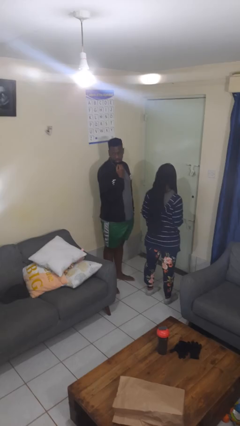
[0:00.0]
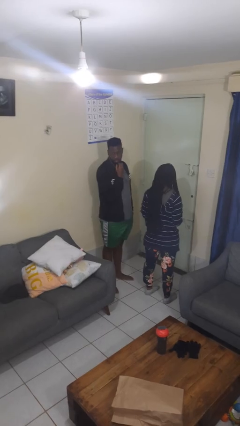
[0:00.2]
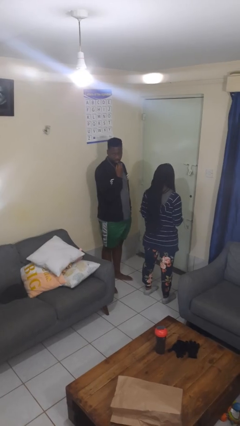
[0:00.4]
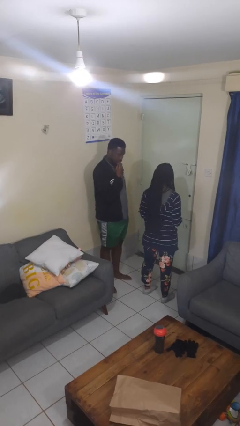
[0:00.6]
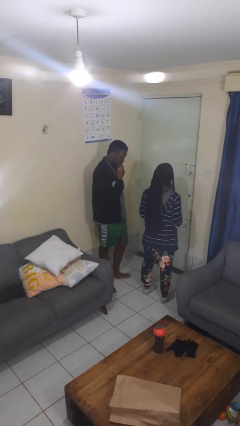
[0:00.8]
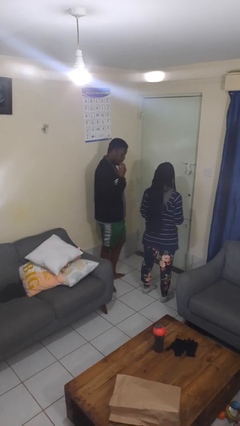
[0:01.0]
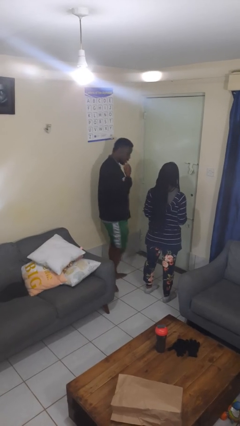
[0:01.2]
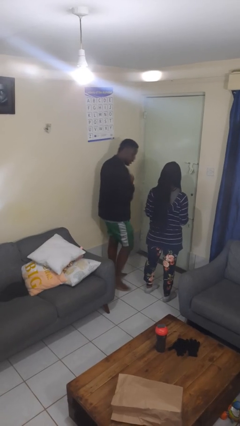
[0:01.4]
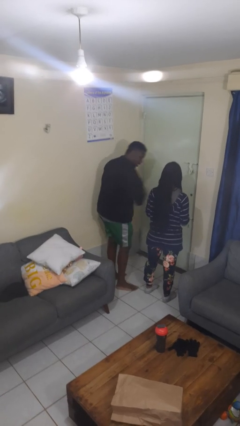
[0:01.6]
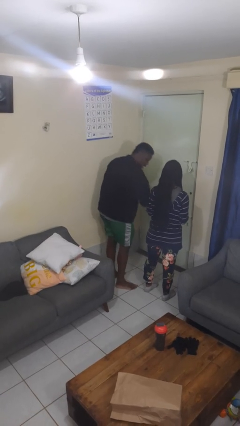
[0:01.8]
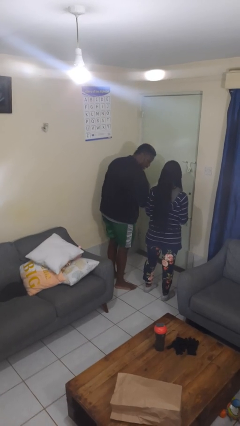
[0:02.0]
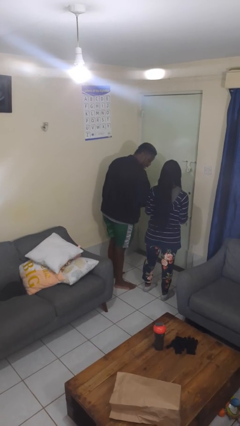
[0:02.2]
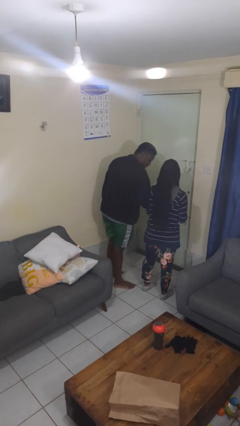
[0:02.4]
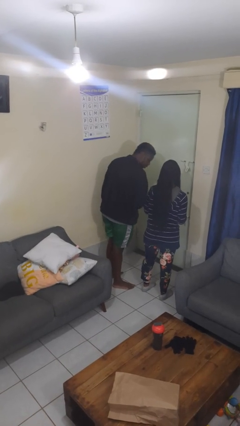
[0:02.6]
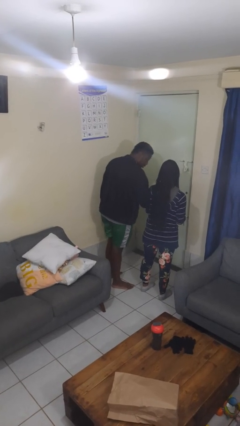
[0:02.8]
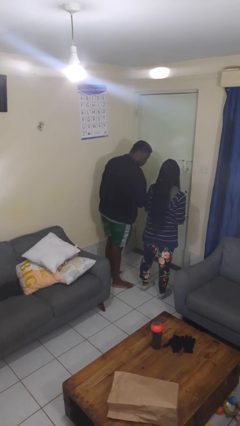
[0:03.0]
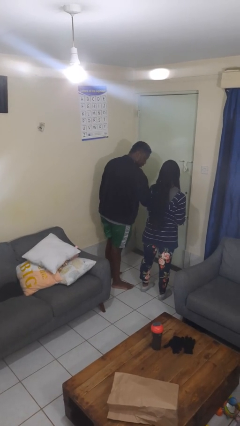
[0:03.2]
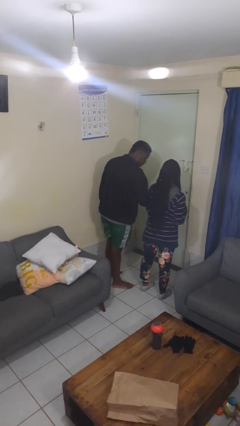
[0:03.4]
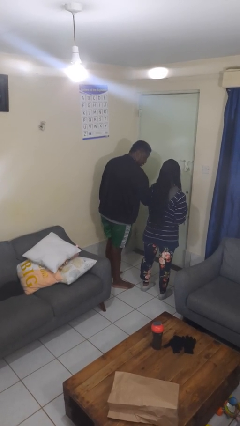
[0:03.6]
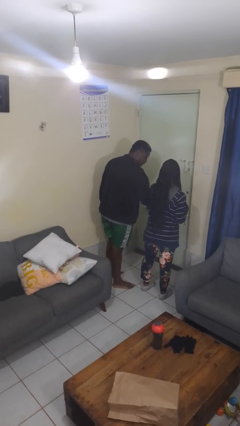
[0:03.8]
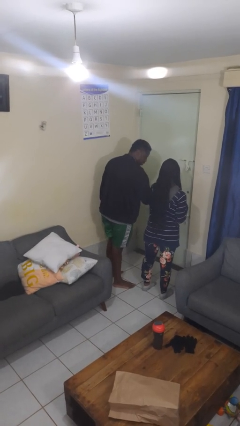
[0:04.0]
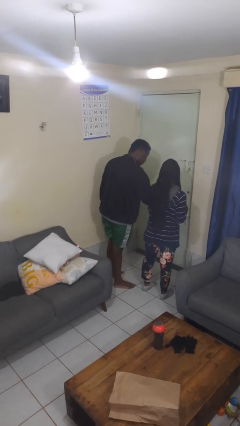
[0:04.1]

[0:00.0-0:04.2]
person nudges person with elbow

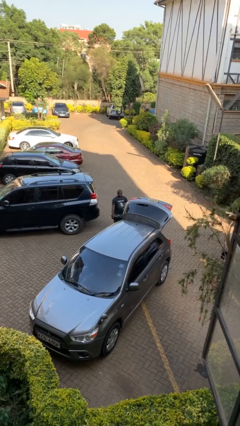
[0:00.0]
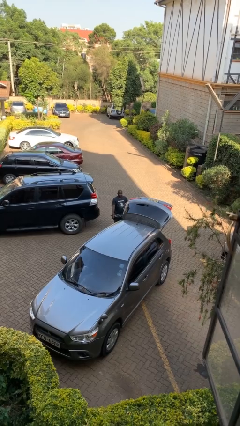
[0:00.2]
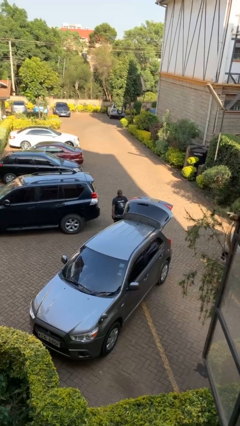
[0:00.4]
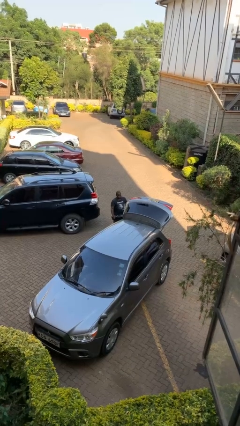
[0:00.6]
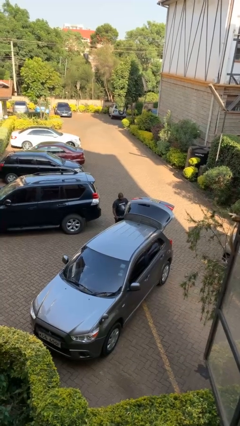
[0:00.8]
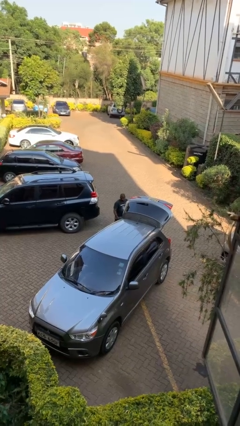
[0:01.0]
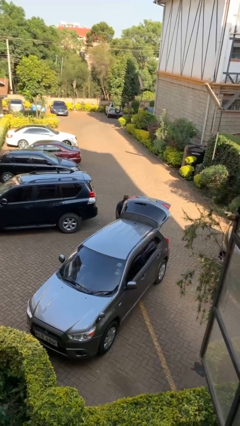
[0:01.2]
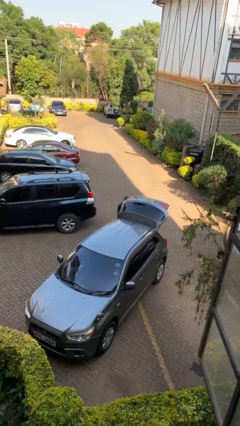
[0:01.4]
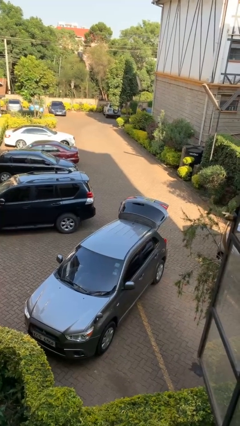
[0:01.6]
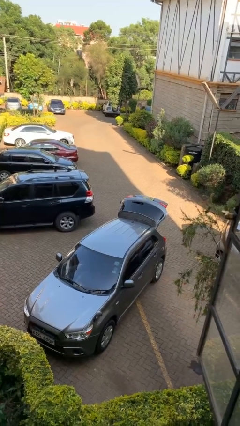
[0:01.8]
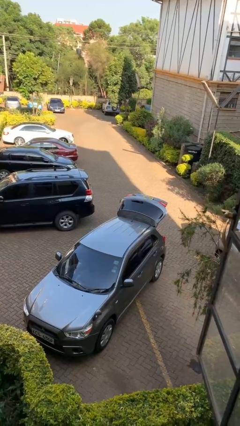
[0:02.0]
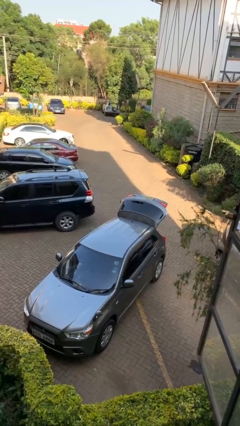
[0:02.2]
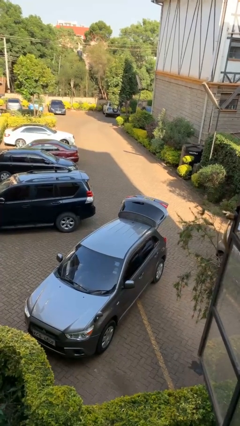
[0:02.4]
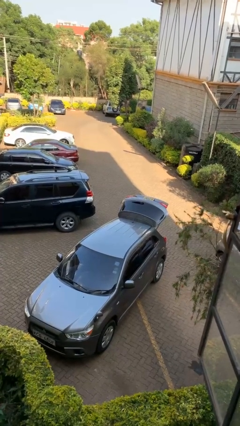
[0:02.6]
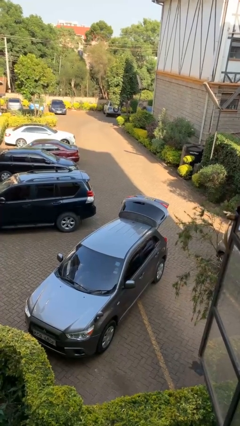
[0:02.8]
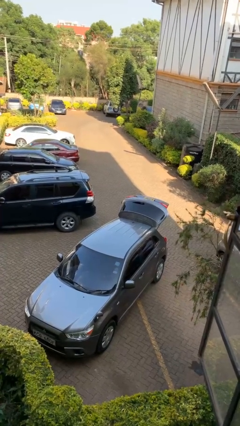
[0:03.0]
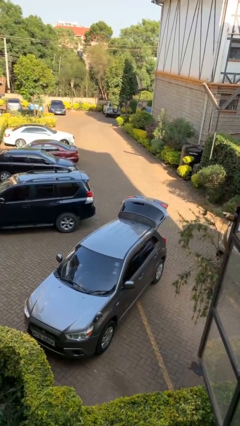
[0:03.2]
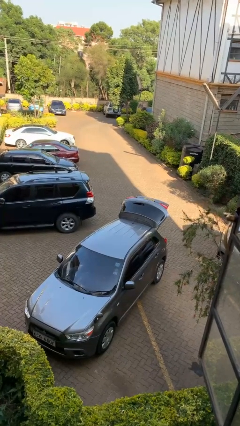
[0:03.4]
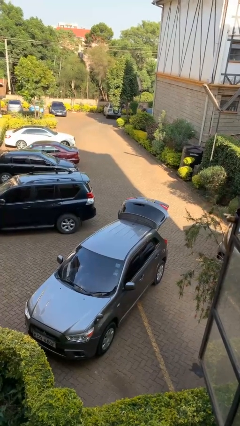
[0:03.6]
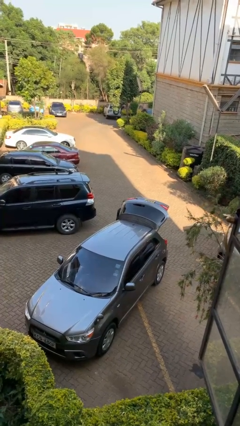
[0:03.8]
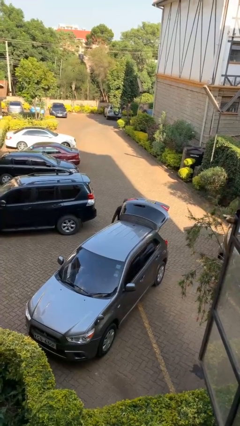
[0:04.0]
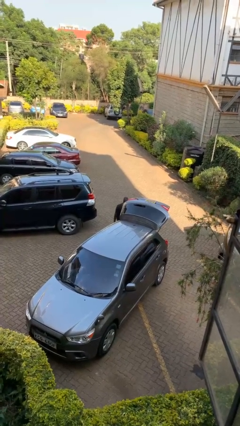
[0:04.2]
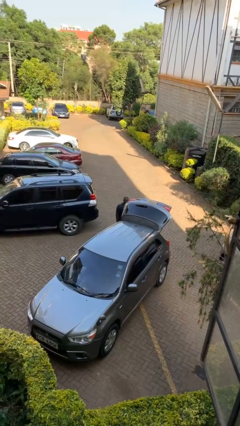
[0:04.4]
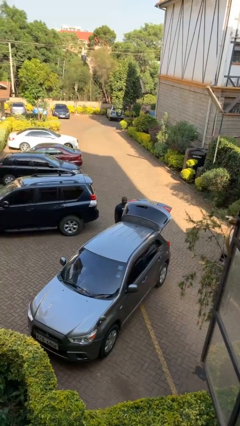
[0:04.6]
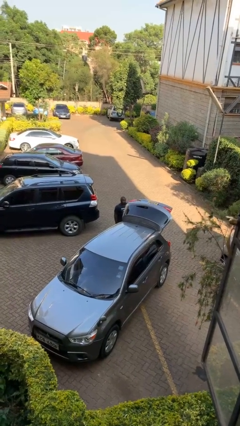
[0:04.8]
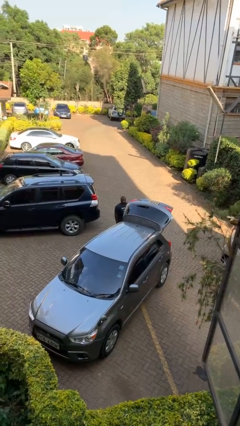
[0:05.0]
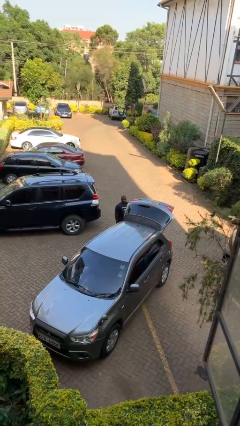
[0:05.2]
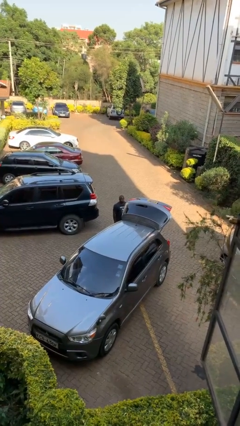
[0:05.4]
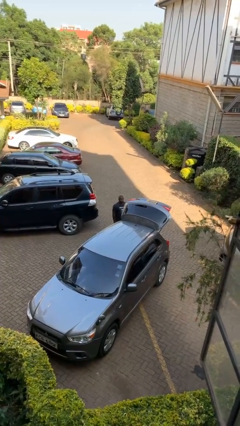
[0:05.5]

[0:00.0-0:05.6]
person loads car

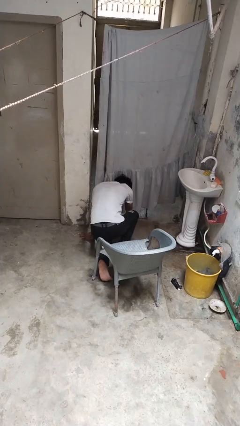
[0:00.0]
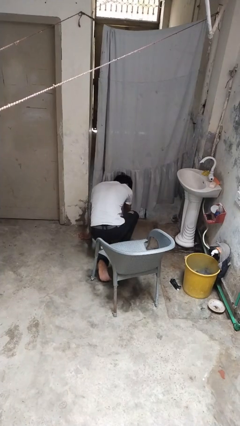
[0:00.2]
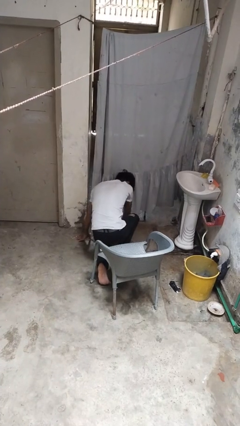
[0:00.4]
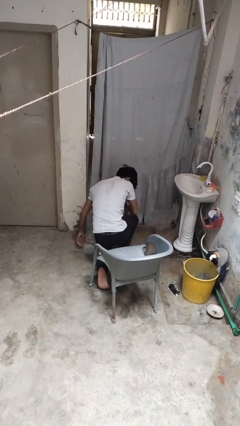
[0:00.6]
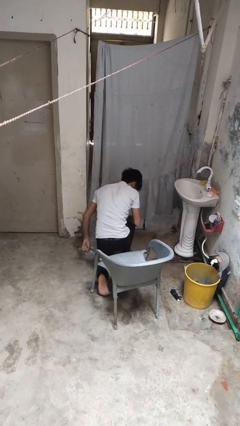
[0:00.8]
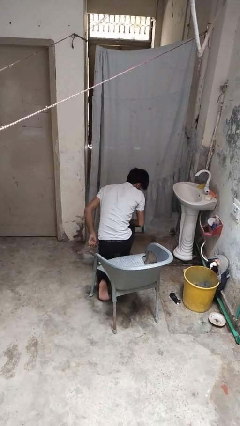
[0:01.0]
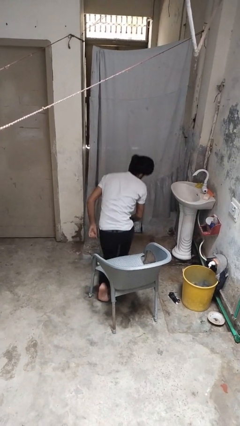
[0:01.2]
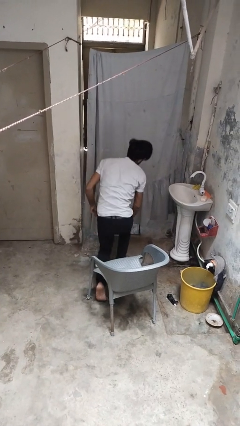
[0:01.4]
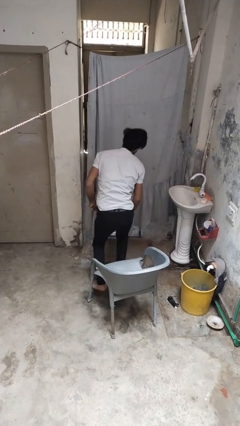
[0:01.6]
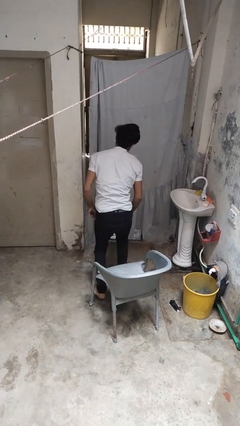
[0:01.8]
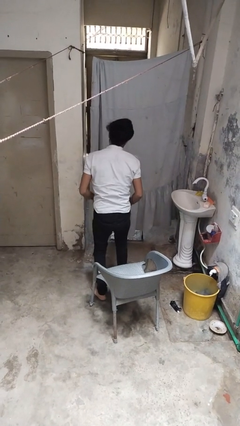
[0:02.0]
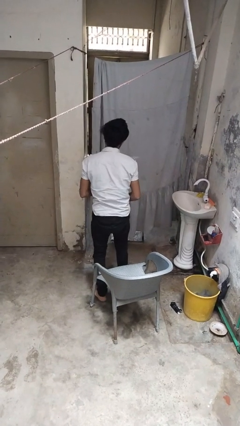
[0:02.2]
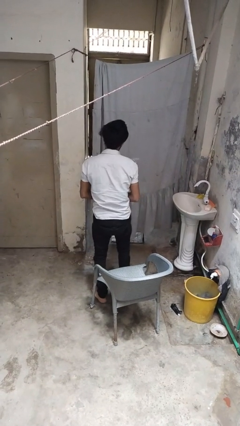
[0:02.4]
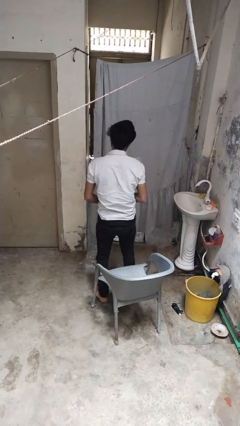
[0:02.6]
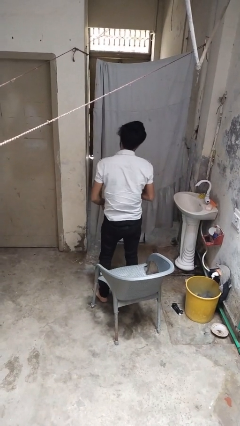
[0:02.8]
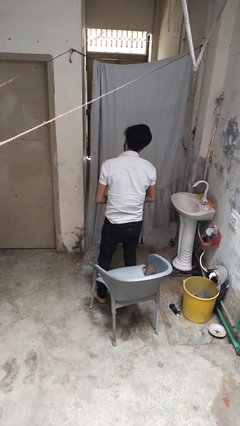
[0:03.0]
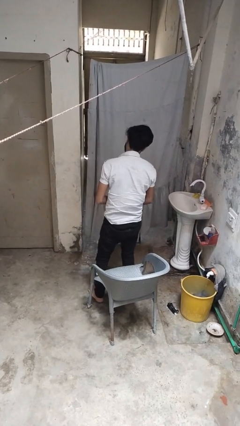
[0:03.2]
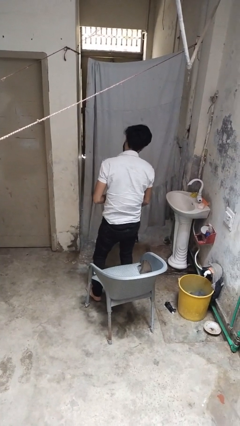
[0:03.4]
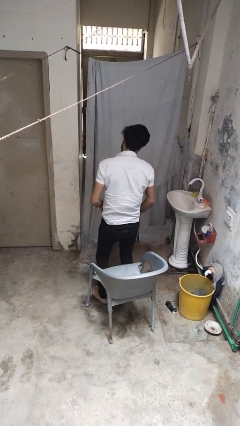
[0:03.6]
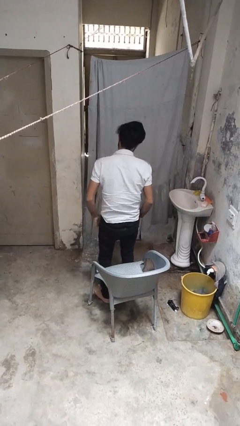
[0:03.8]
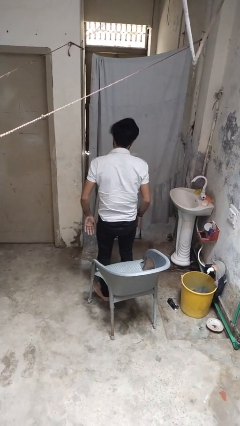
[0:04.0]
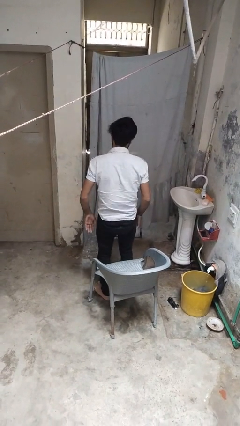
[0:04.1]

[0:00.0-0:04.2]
person stands up from floor

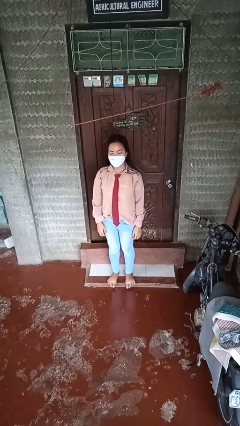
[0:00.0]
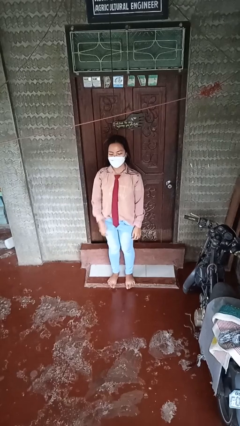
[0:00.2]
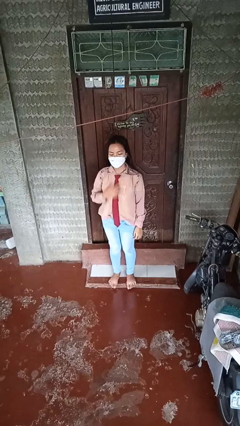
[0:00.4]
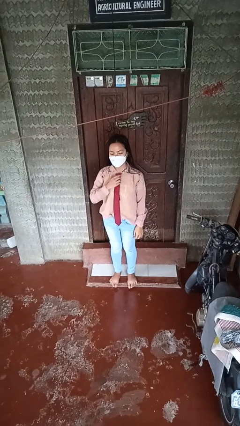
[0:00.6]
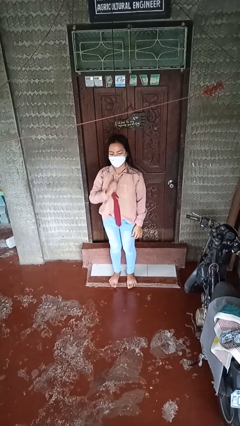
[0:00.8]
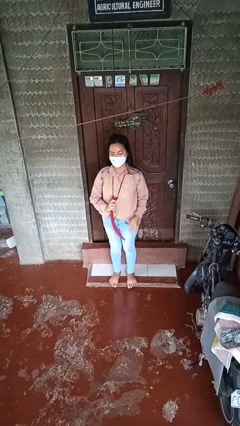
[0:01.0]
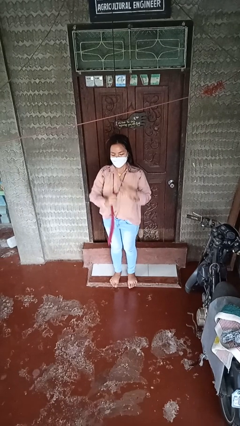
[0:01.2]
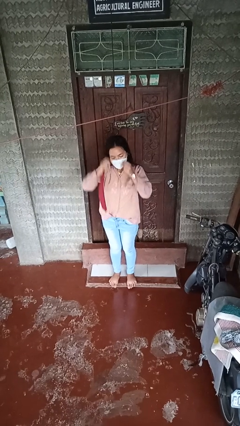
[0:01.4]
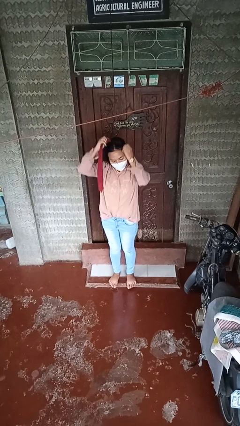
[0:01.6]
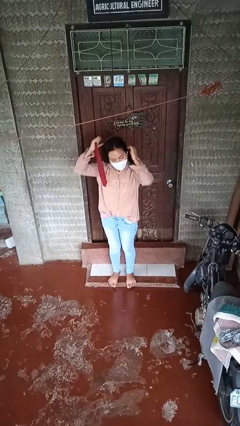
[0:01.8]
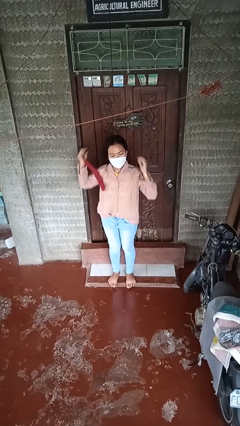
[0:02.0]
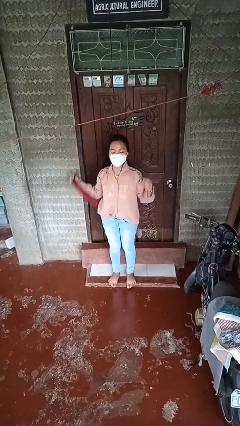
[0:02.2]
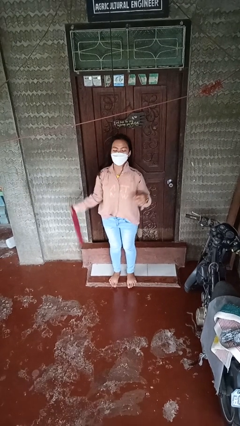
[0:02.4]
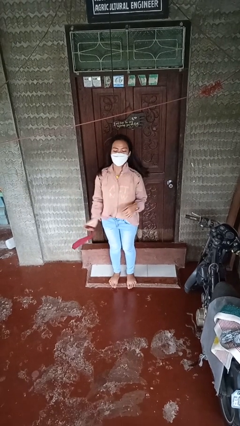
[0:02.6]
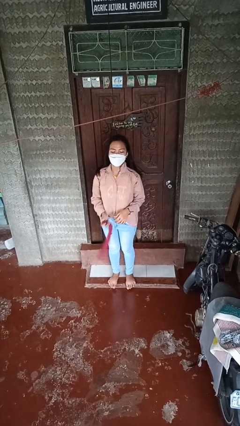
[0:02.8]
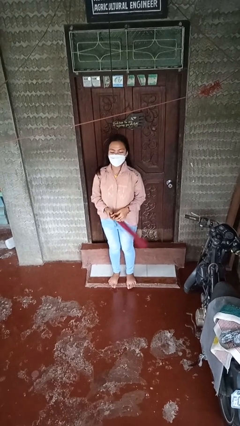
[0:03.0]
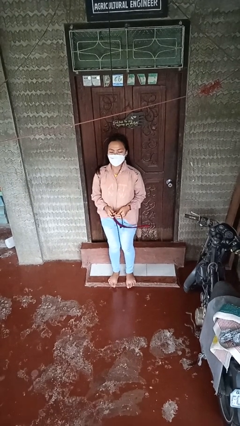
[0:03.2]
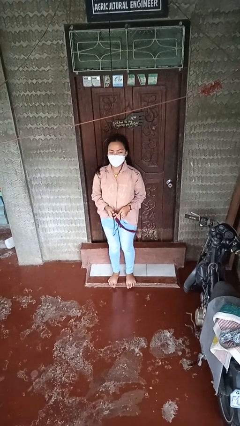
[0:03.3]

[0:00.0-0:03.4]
person takes off necktie

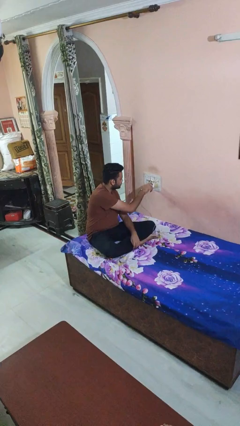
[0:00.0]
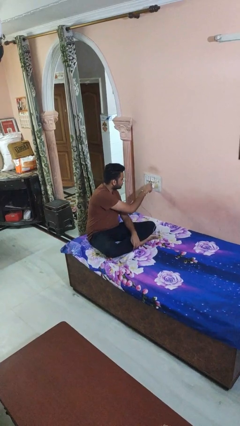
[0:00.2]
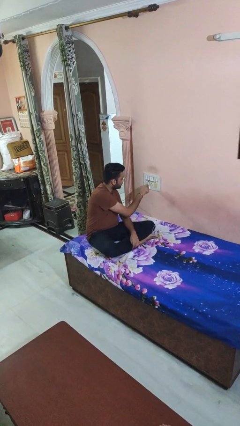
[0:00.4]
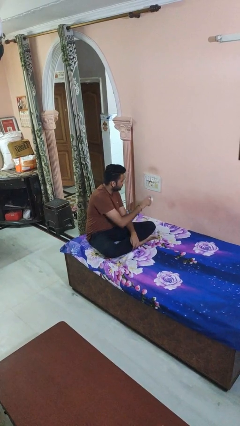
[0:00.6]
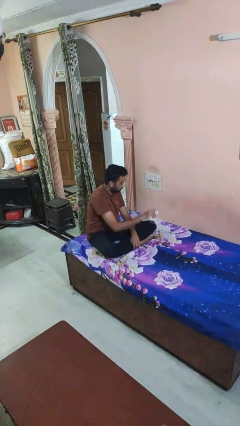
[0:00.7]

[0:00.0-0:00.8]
person unplugs from electrical socket
